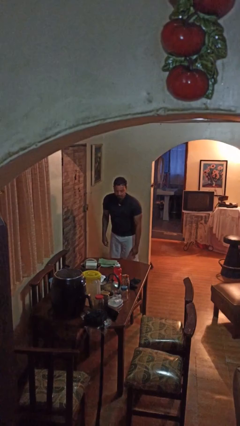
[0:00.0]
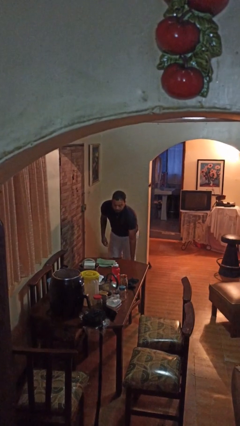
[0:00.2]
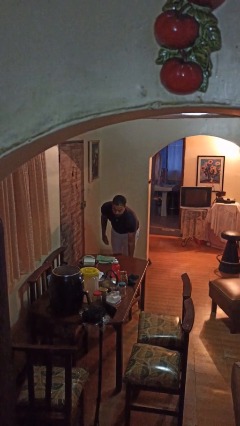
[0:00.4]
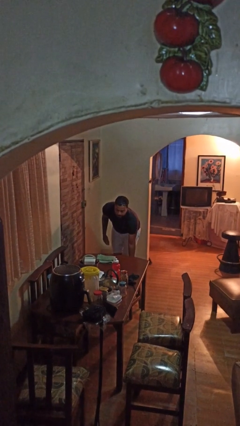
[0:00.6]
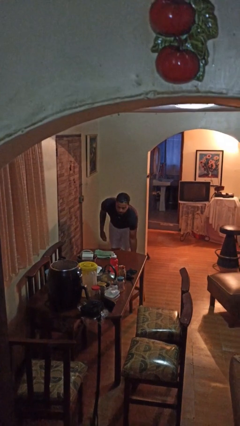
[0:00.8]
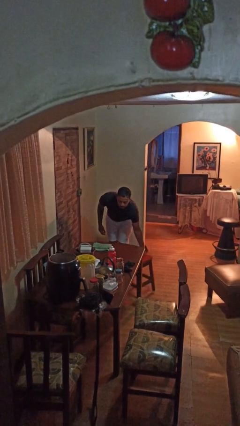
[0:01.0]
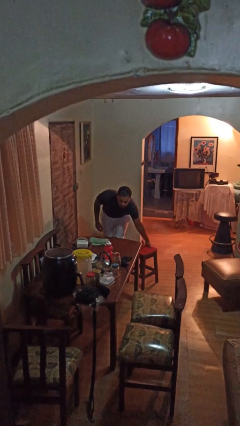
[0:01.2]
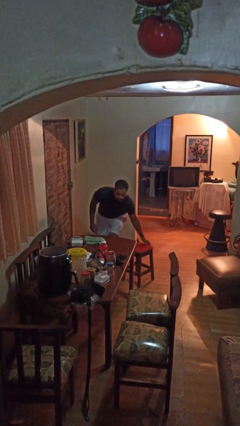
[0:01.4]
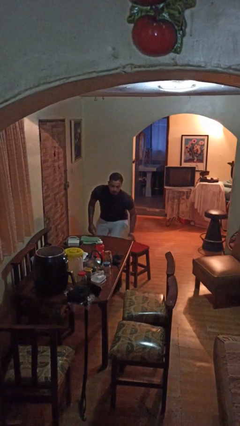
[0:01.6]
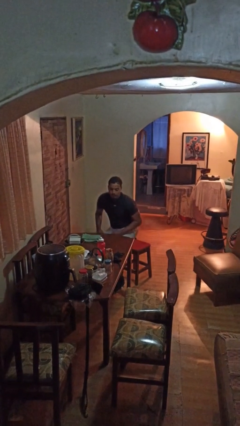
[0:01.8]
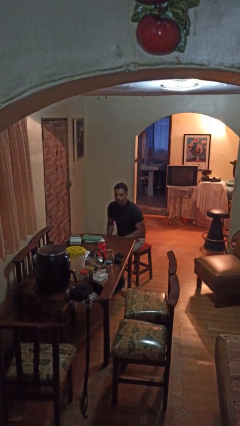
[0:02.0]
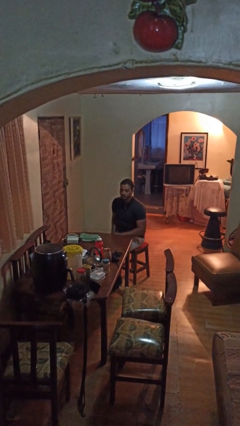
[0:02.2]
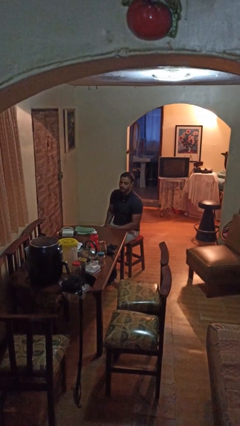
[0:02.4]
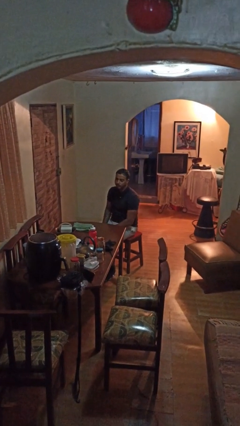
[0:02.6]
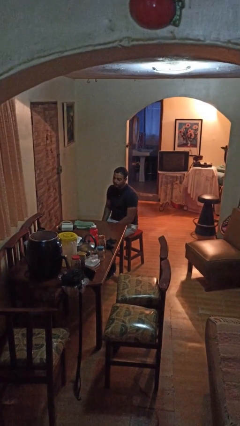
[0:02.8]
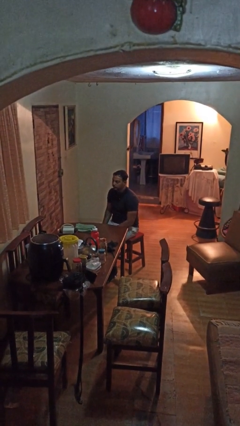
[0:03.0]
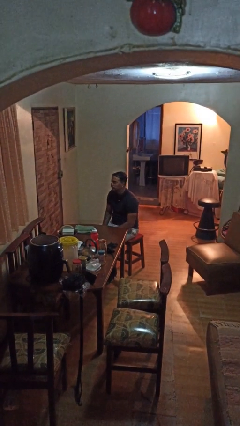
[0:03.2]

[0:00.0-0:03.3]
person sits down

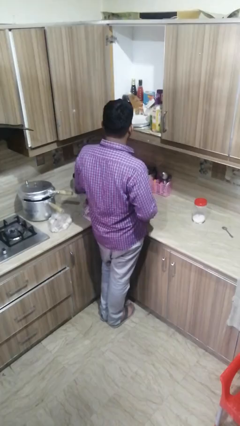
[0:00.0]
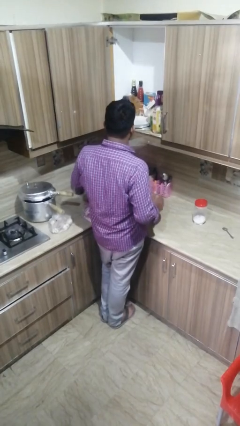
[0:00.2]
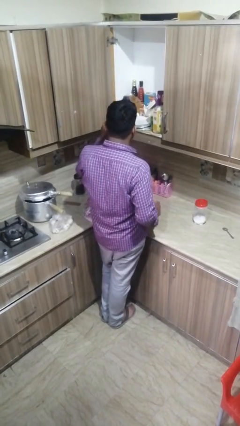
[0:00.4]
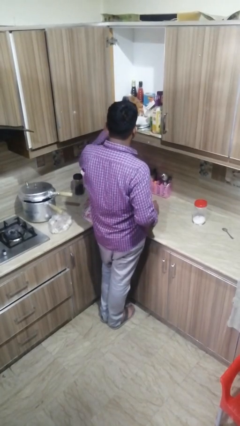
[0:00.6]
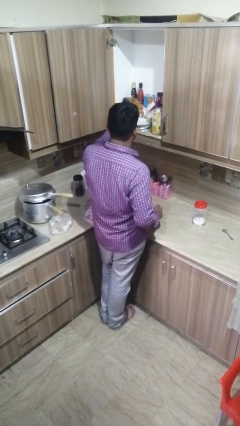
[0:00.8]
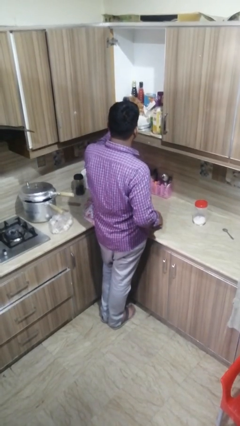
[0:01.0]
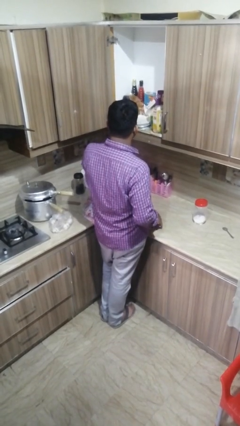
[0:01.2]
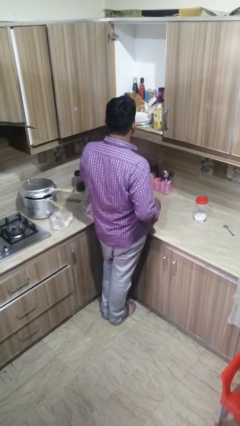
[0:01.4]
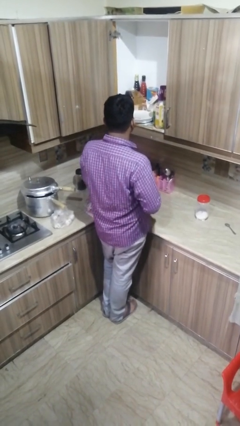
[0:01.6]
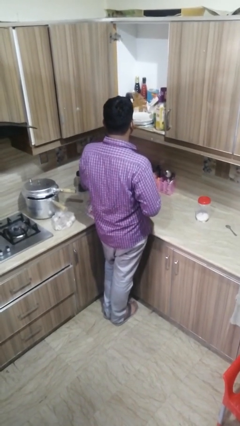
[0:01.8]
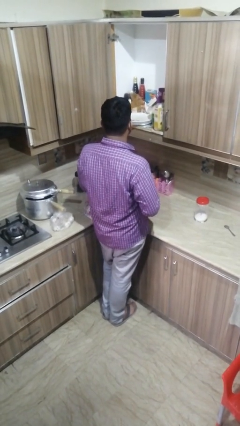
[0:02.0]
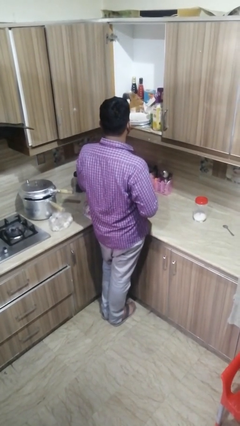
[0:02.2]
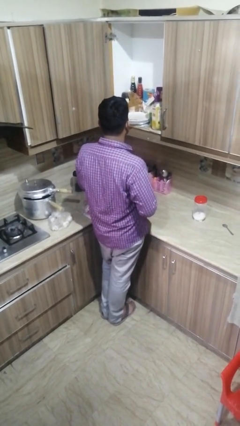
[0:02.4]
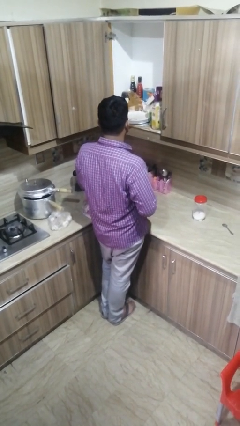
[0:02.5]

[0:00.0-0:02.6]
person puts object in cabinet

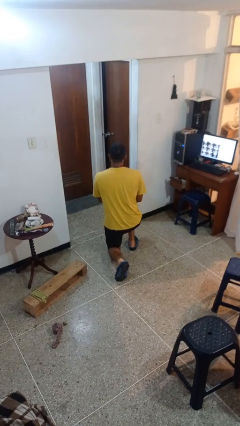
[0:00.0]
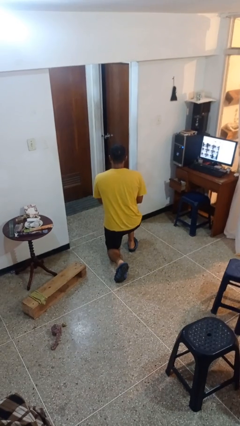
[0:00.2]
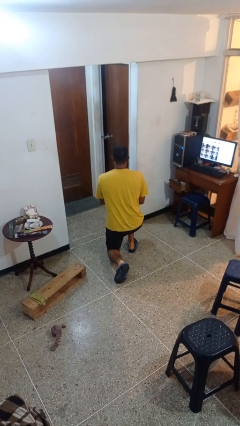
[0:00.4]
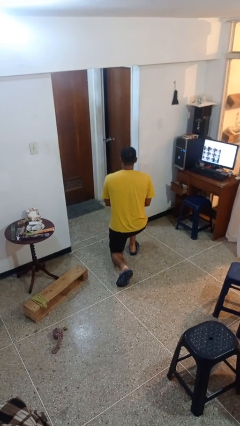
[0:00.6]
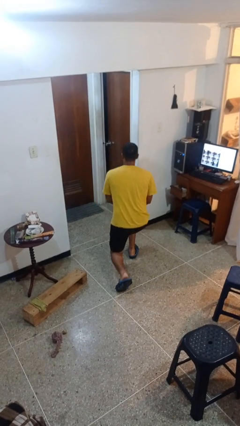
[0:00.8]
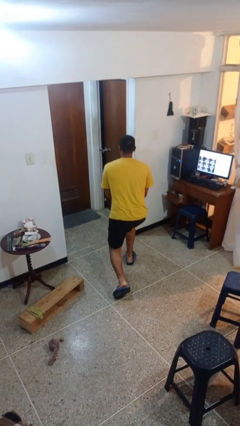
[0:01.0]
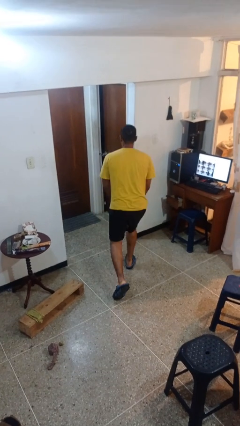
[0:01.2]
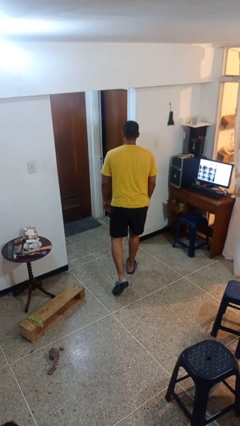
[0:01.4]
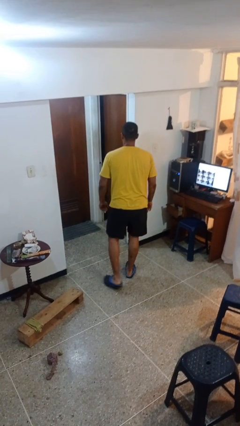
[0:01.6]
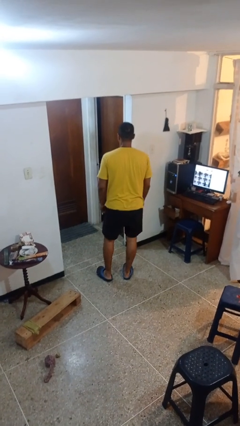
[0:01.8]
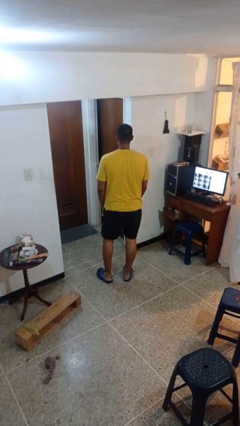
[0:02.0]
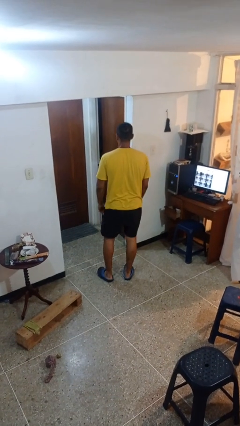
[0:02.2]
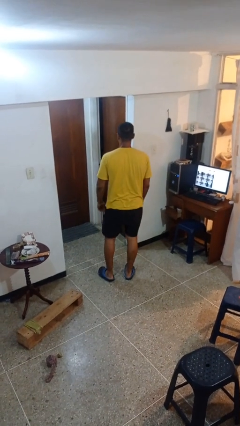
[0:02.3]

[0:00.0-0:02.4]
person stands up from floor

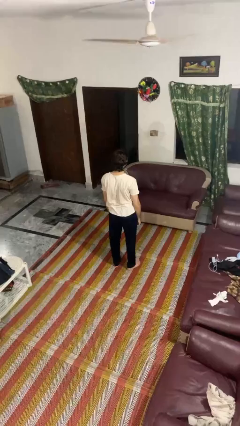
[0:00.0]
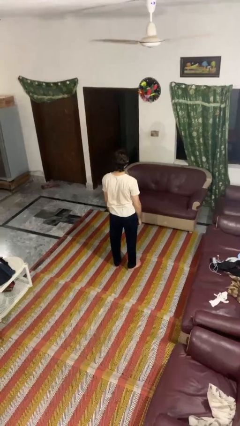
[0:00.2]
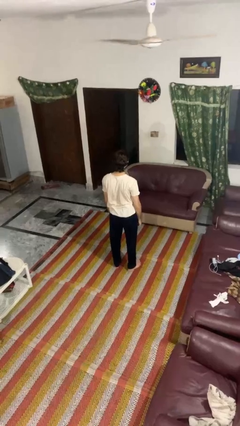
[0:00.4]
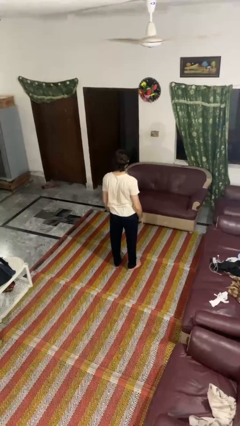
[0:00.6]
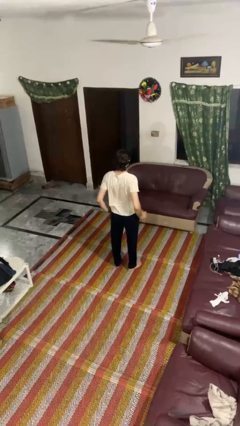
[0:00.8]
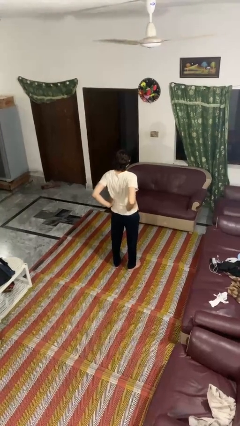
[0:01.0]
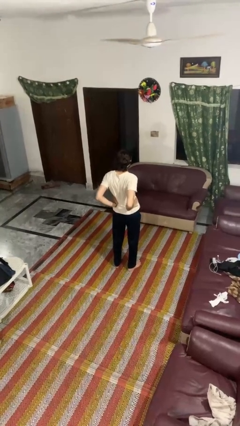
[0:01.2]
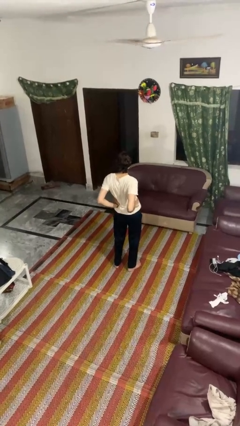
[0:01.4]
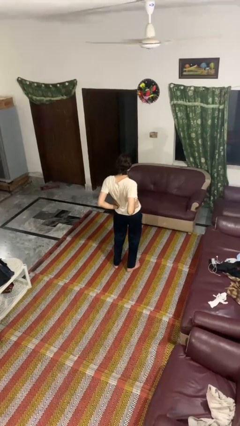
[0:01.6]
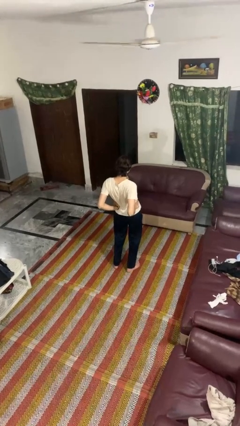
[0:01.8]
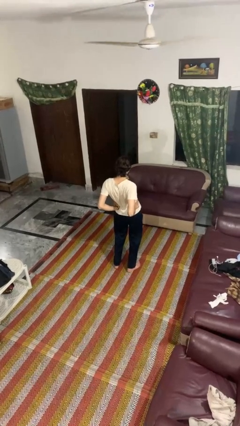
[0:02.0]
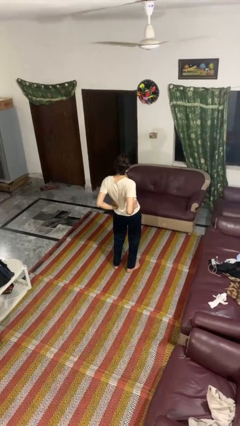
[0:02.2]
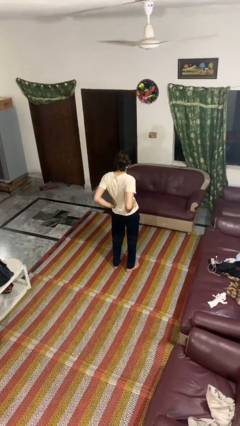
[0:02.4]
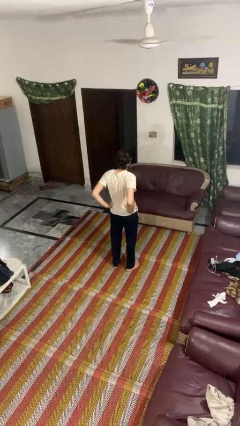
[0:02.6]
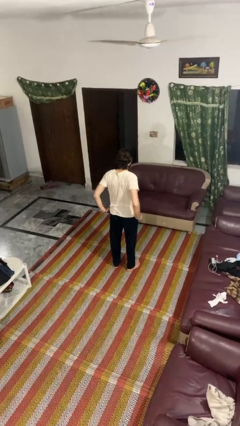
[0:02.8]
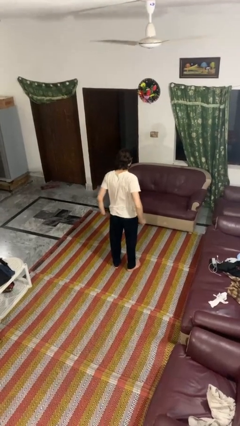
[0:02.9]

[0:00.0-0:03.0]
person stretches back

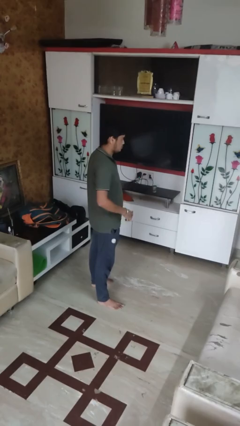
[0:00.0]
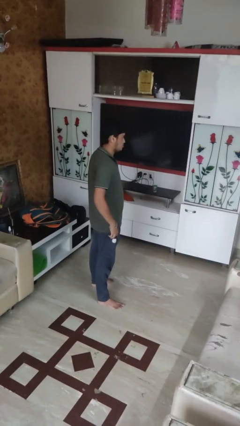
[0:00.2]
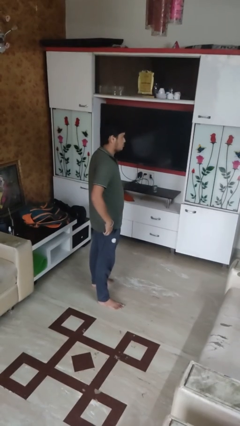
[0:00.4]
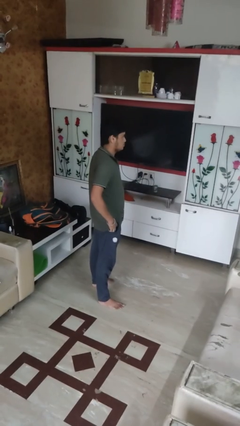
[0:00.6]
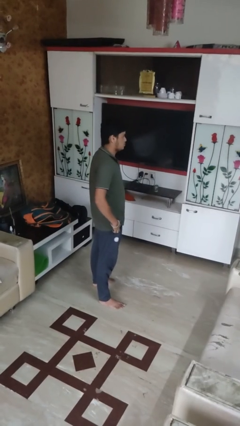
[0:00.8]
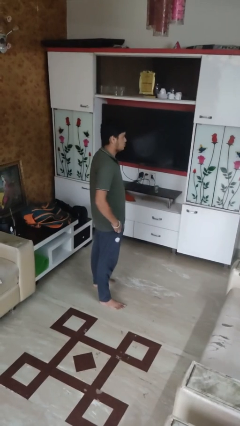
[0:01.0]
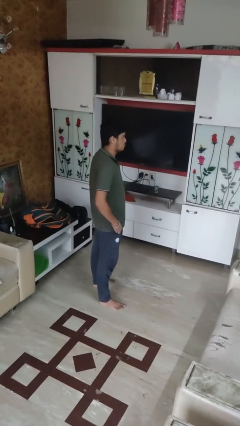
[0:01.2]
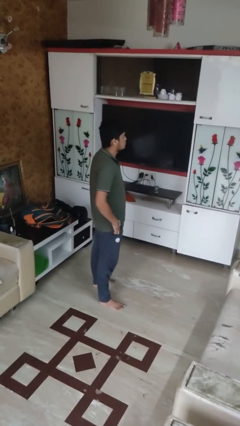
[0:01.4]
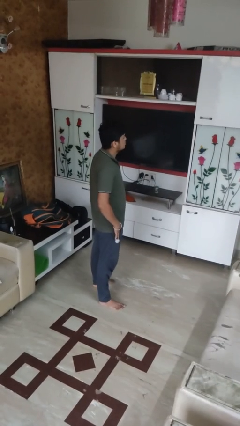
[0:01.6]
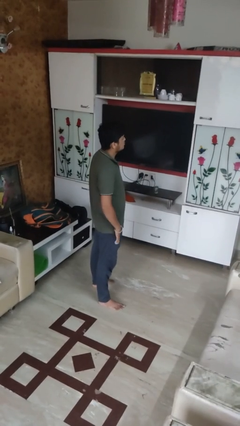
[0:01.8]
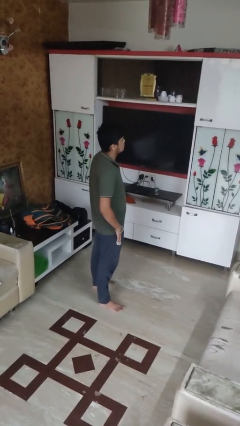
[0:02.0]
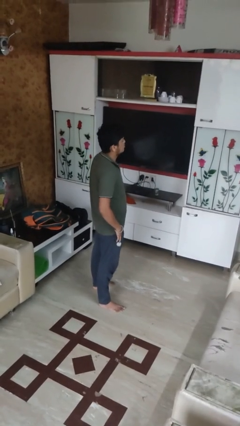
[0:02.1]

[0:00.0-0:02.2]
person puts phone into pocket

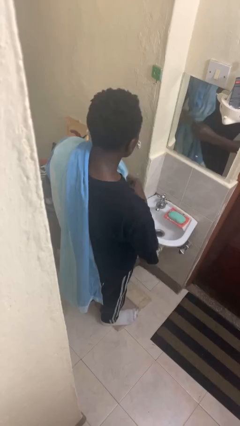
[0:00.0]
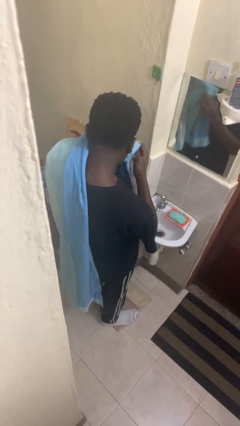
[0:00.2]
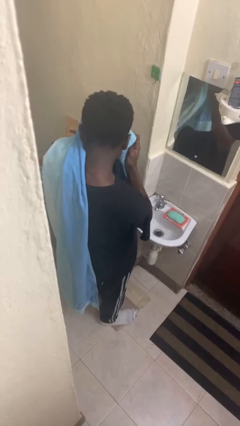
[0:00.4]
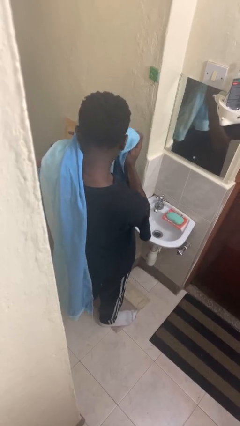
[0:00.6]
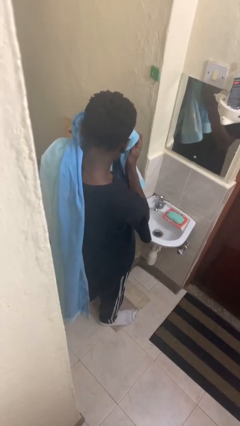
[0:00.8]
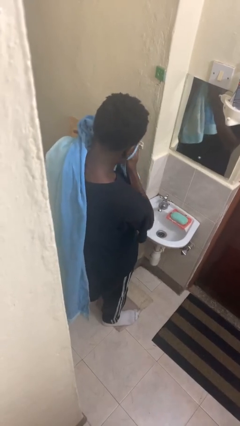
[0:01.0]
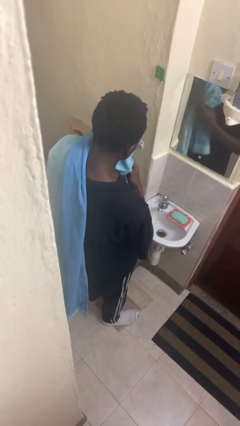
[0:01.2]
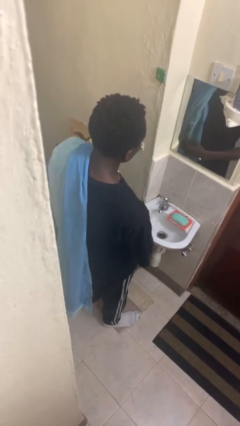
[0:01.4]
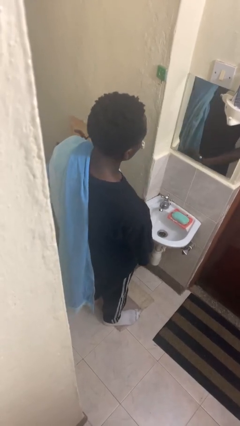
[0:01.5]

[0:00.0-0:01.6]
person dries face with towel

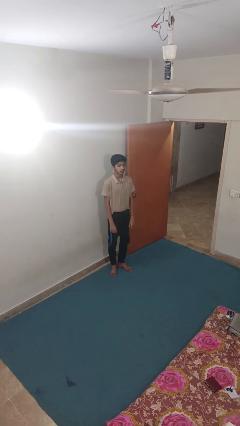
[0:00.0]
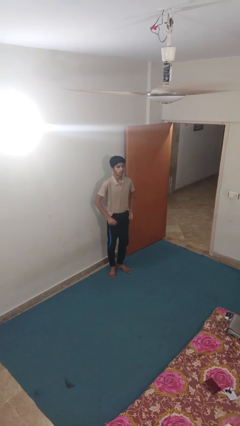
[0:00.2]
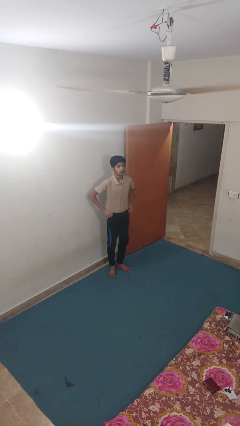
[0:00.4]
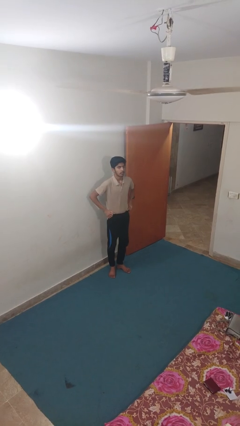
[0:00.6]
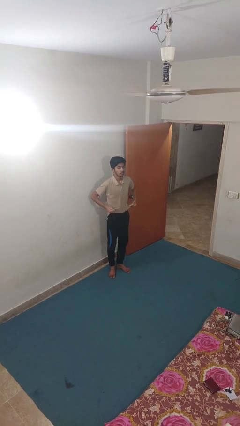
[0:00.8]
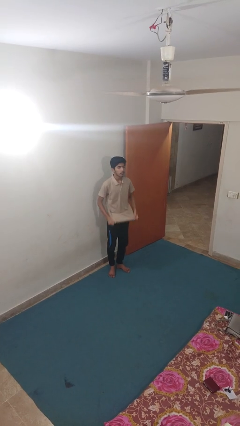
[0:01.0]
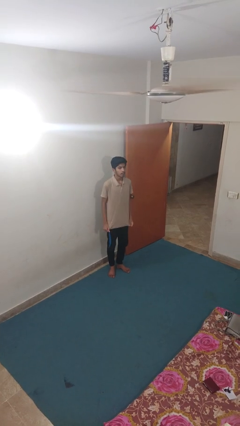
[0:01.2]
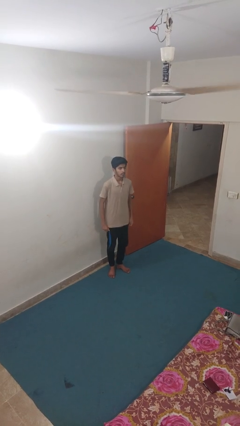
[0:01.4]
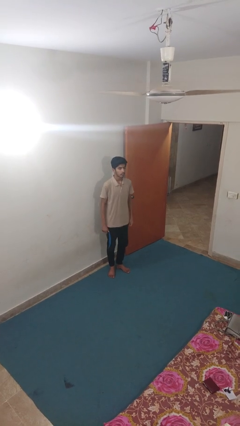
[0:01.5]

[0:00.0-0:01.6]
person untucks shirt

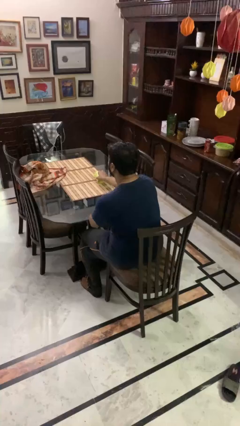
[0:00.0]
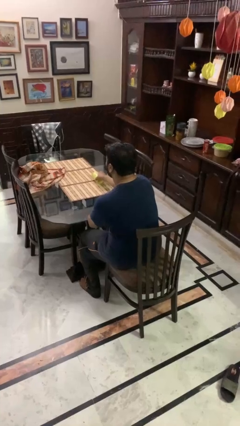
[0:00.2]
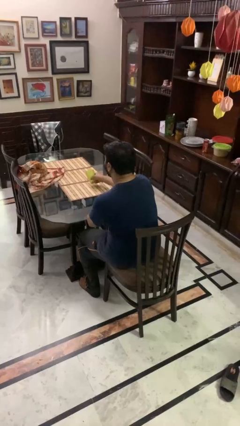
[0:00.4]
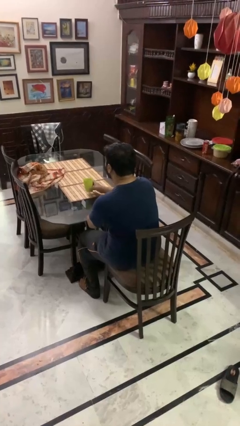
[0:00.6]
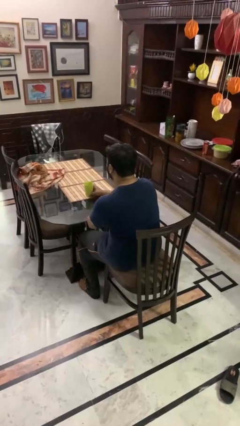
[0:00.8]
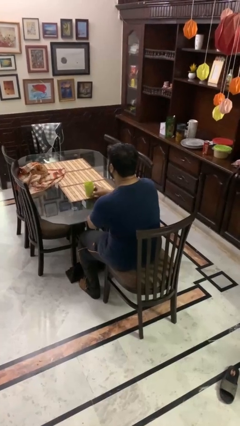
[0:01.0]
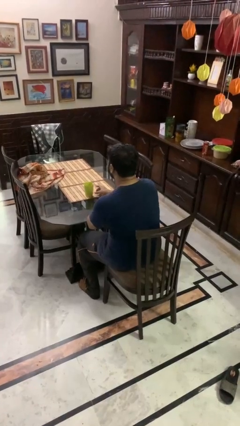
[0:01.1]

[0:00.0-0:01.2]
person sets upright glass
